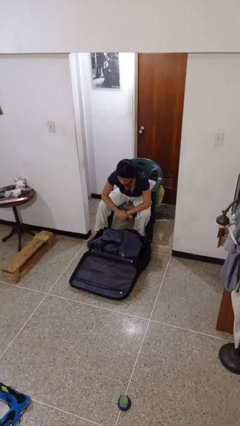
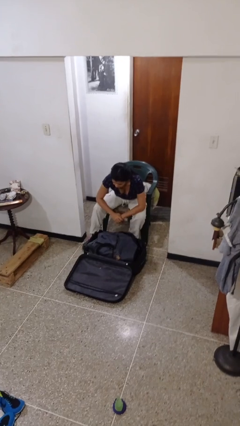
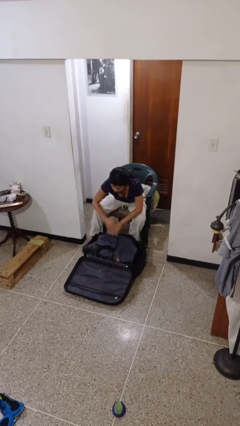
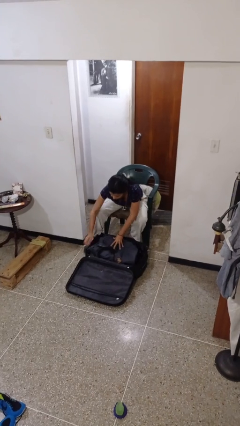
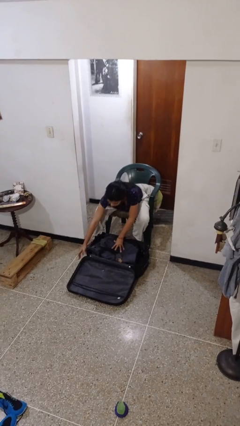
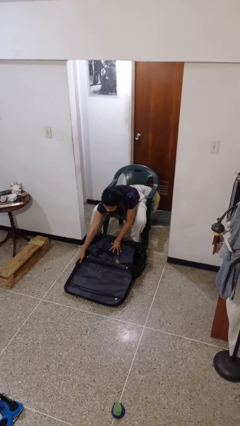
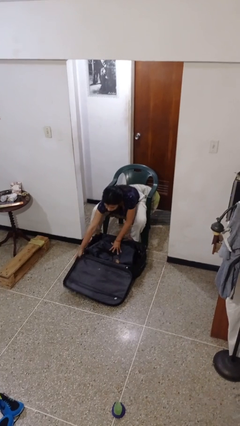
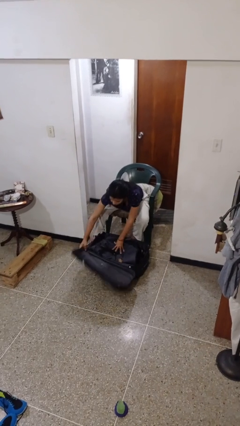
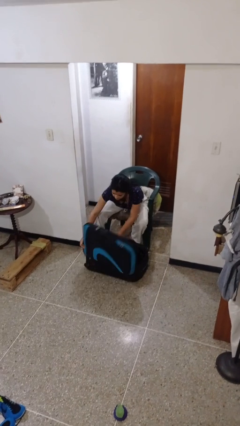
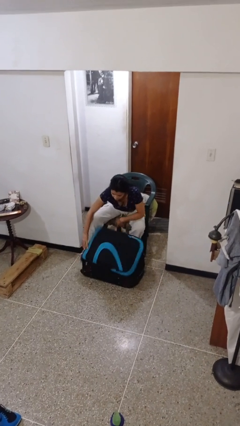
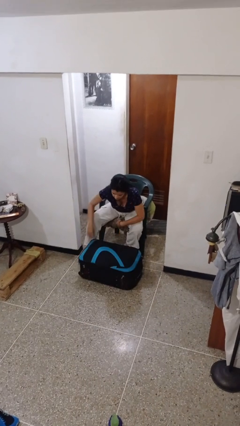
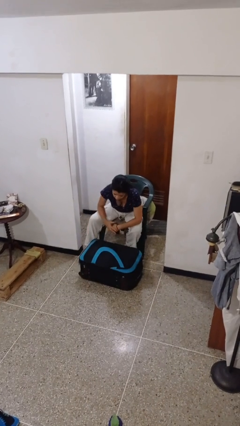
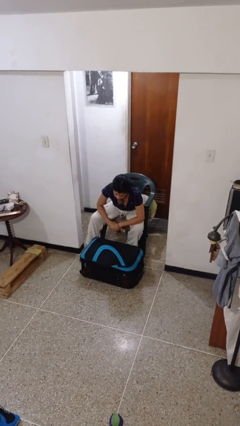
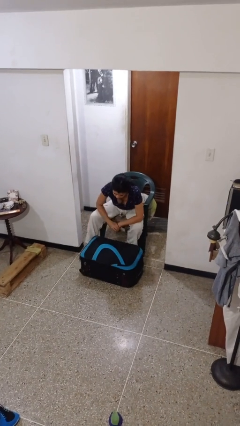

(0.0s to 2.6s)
person closes suitcase

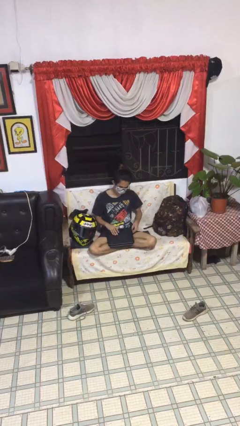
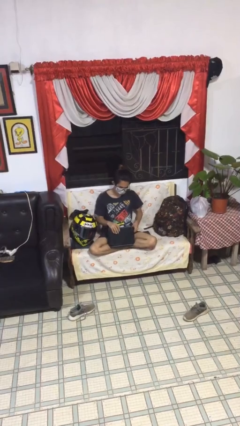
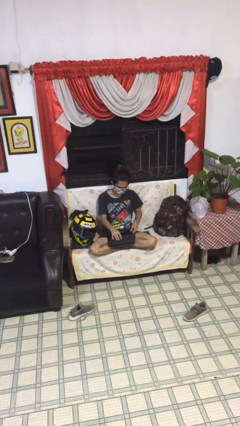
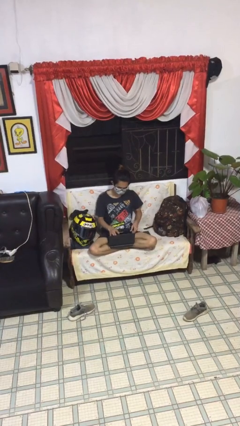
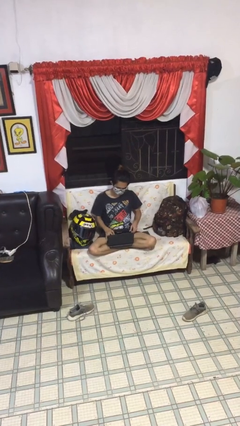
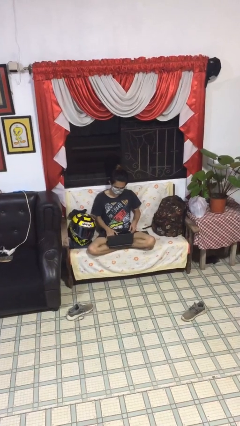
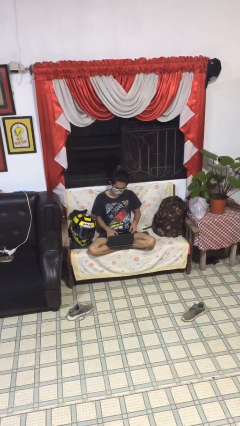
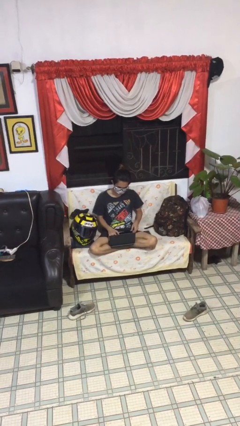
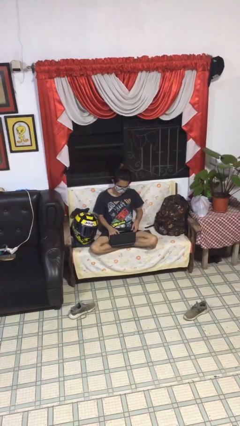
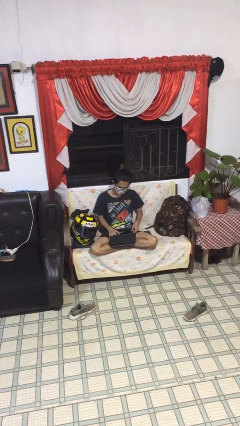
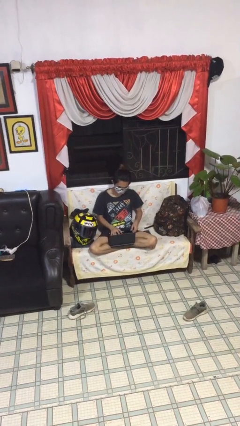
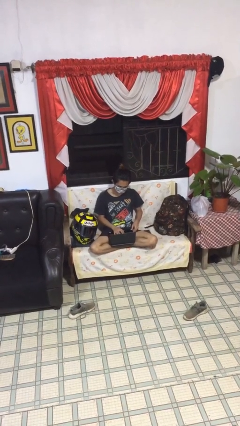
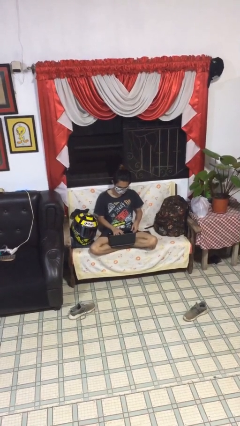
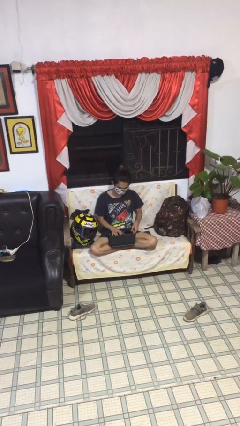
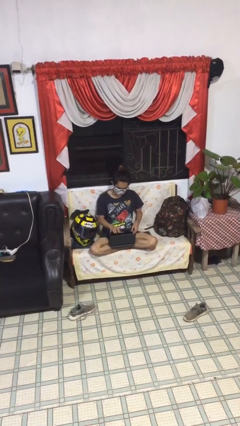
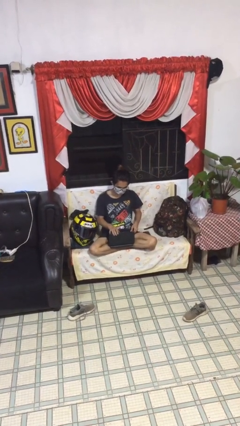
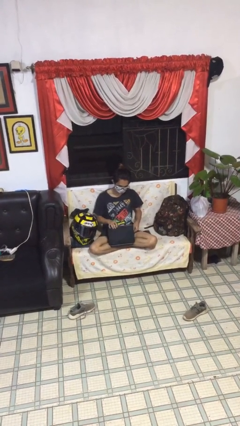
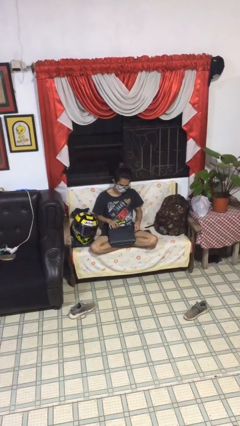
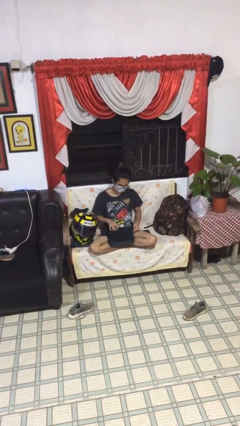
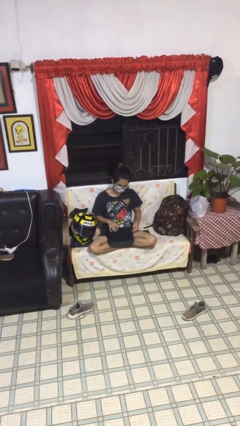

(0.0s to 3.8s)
person interacts with laptop

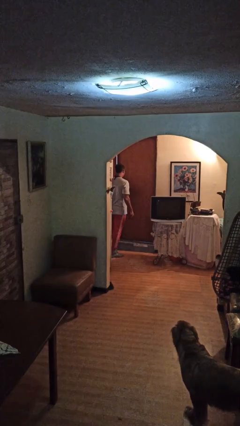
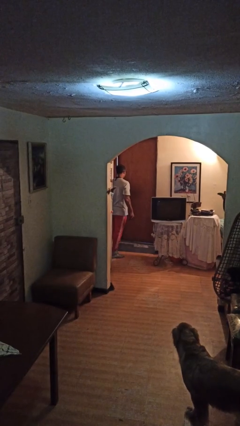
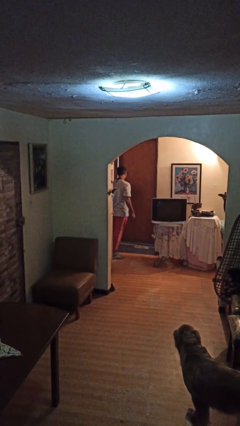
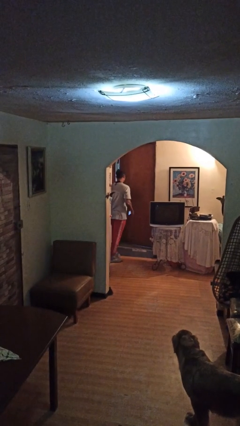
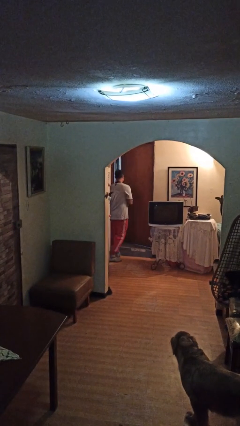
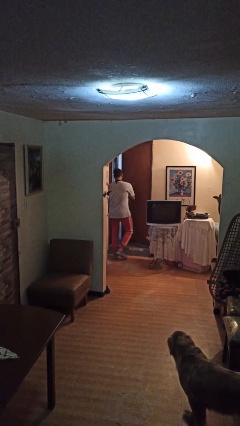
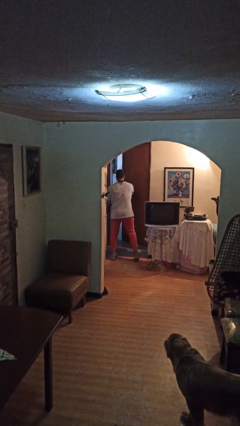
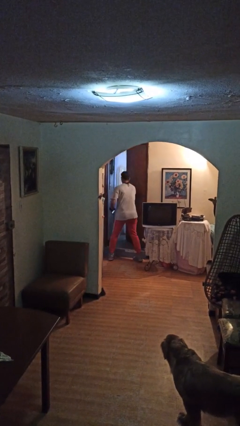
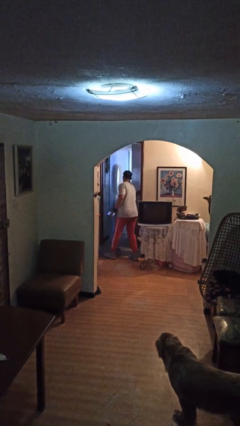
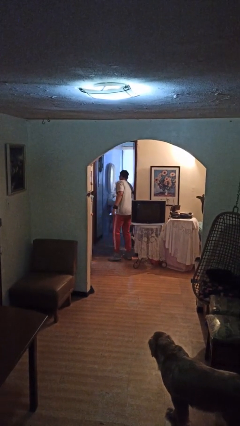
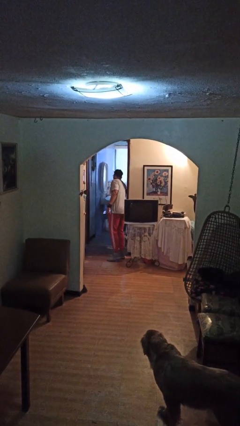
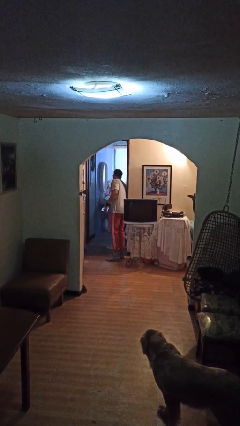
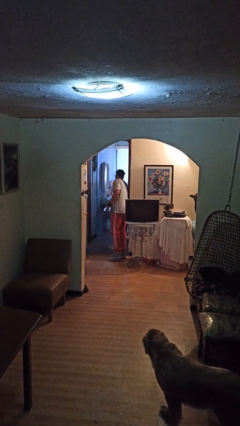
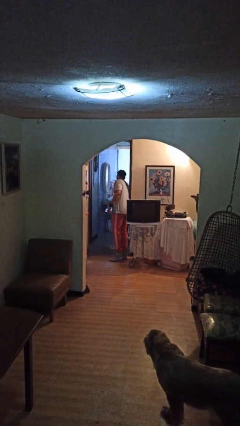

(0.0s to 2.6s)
person opens facility door

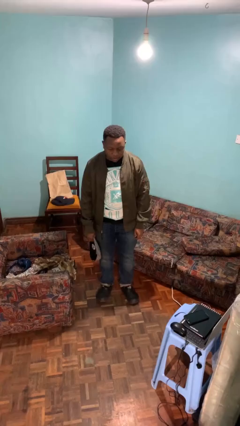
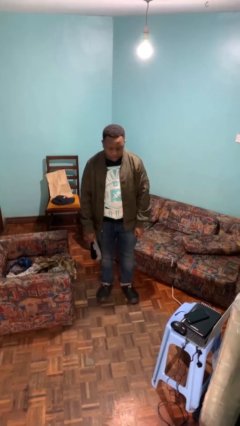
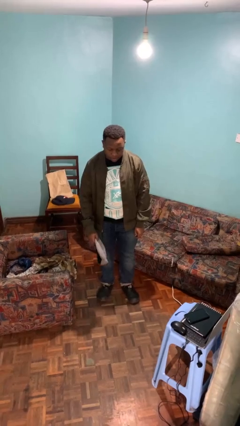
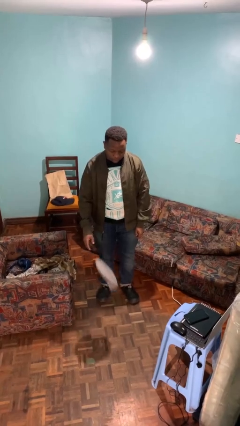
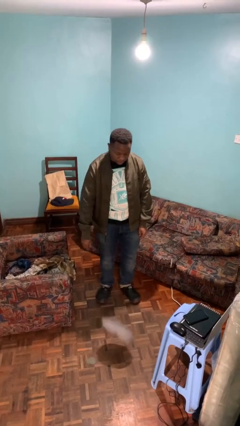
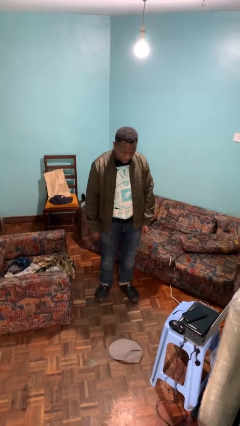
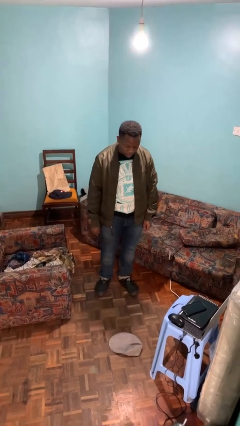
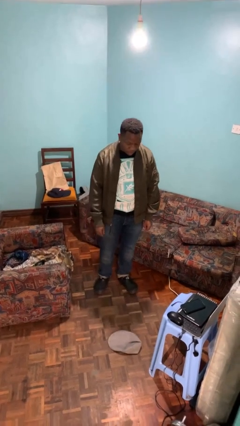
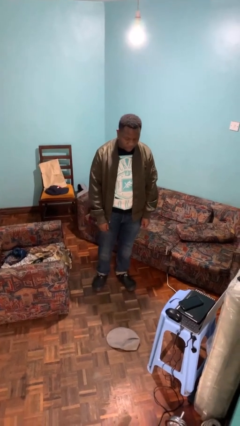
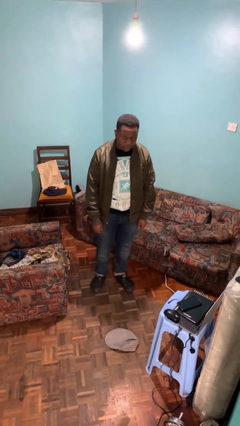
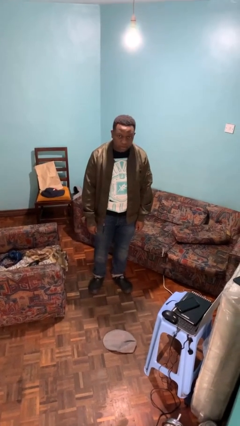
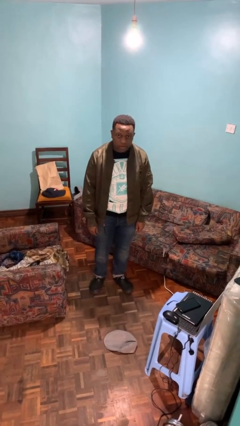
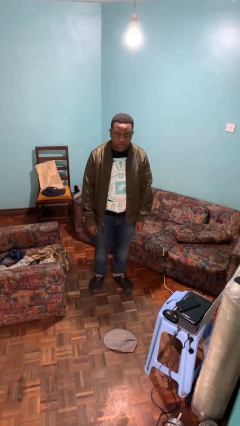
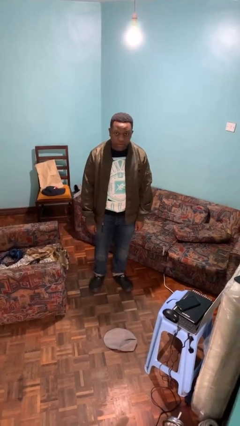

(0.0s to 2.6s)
person drops object

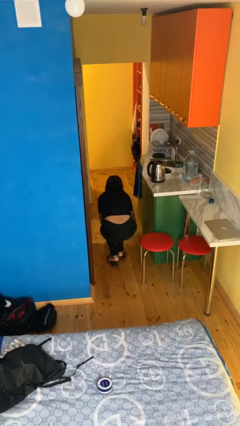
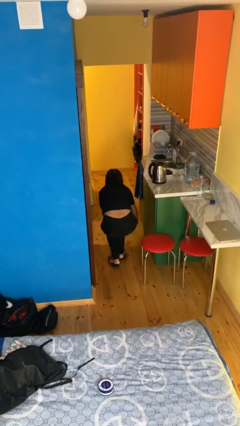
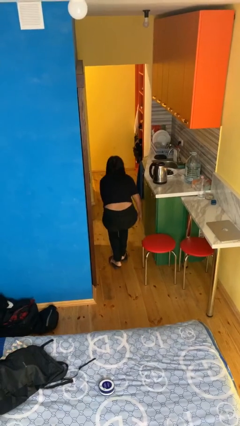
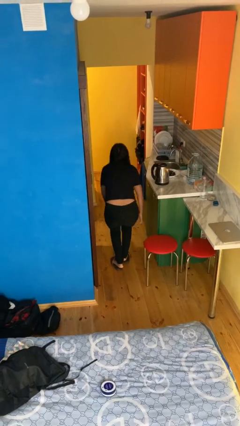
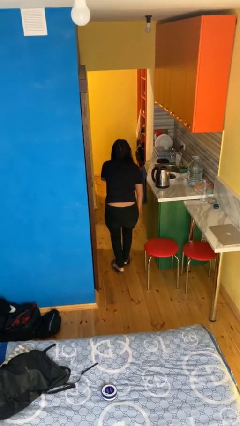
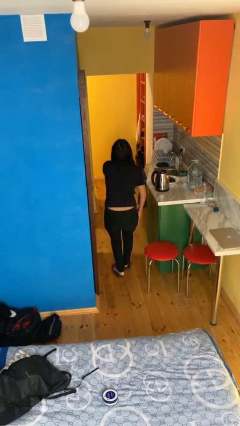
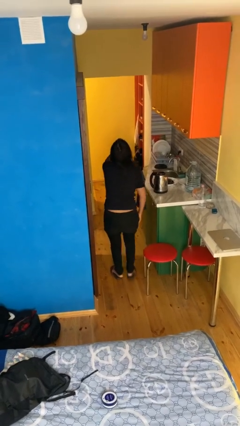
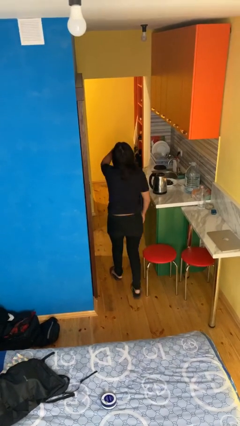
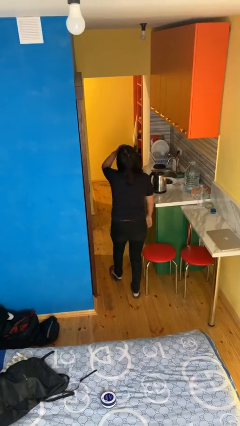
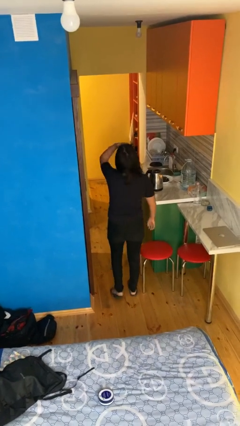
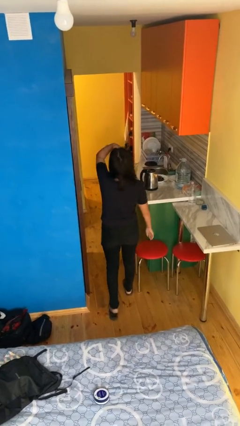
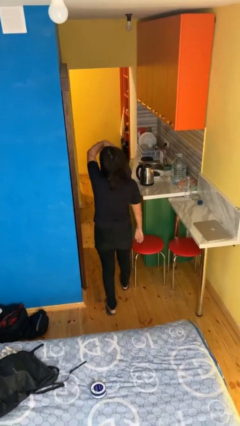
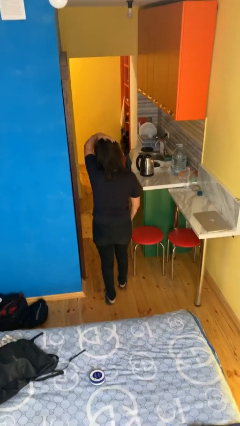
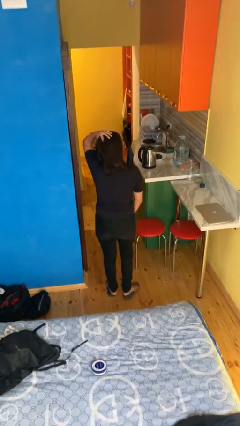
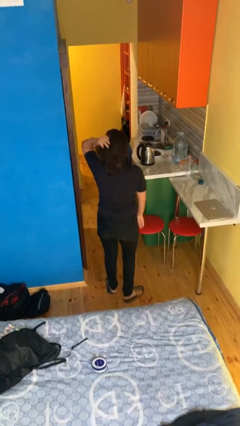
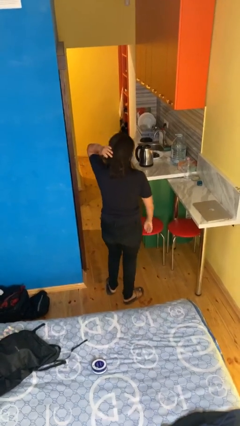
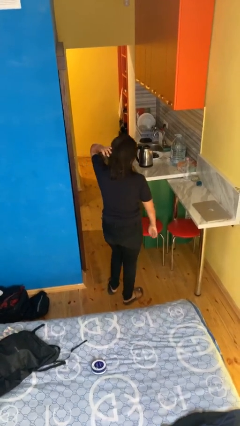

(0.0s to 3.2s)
person stands up from floor

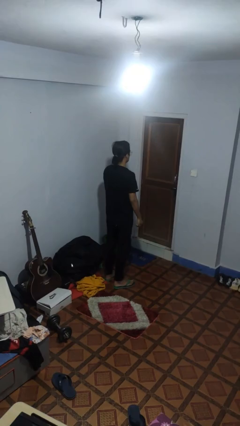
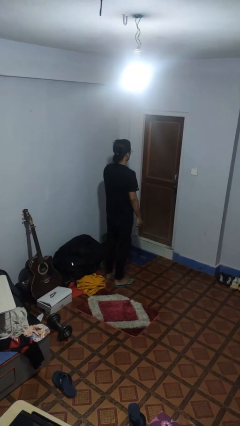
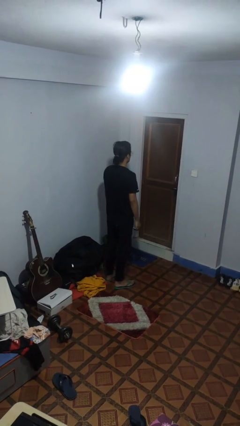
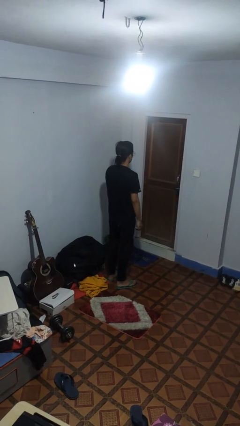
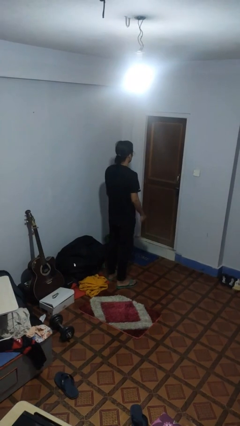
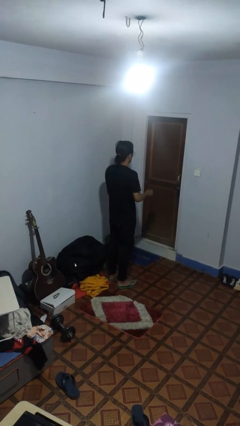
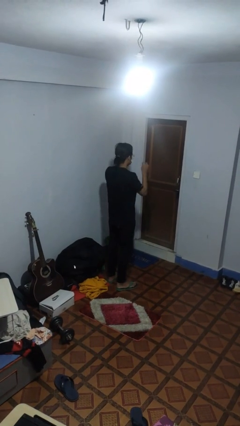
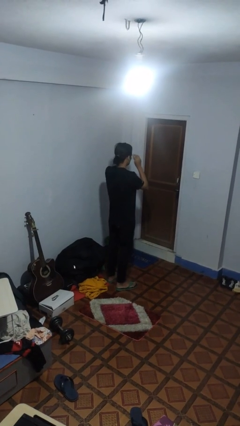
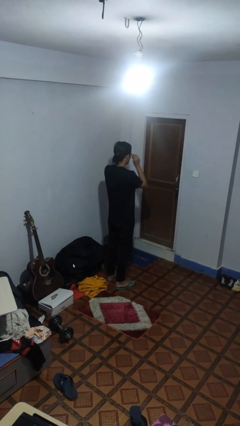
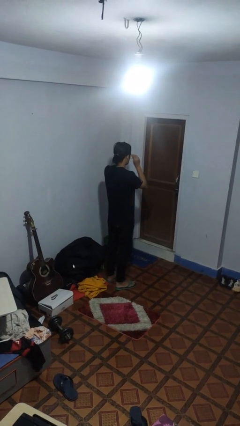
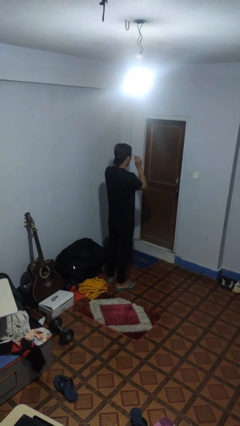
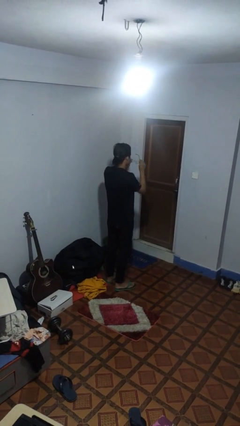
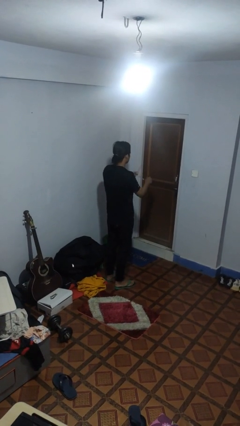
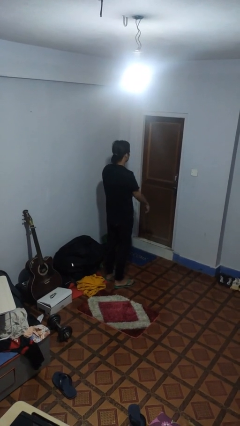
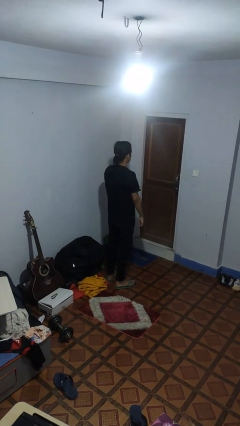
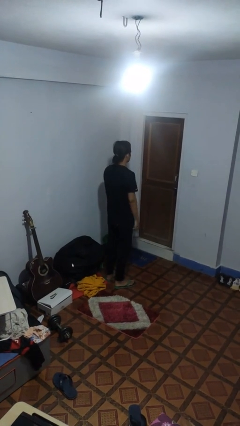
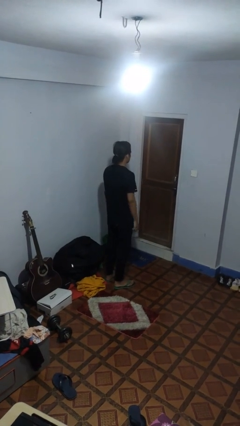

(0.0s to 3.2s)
person takes off glasses
